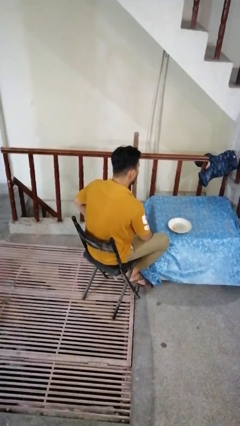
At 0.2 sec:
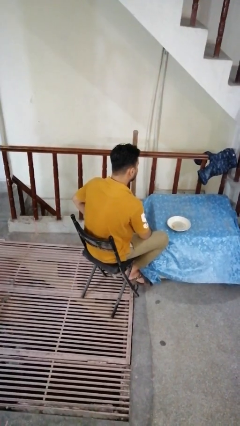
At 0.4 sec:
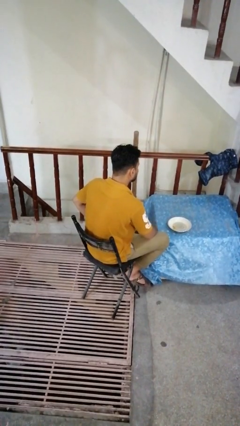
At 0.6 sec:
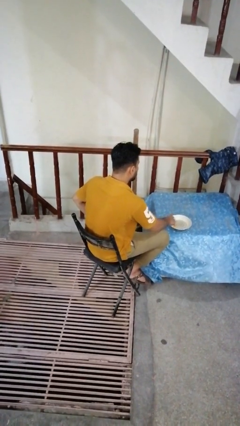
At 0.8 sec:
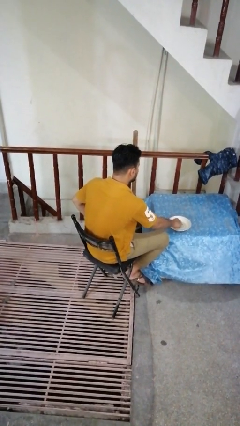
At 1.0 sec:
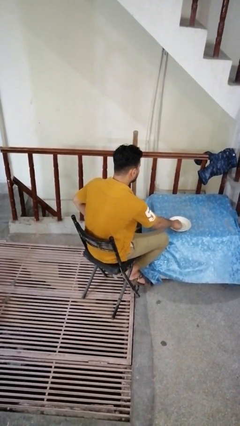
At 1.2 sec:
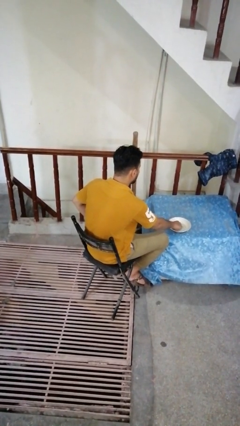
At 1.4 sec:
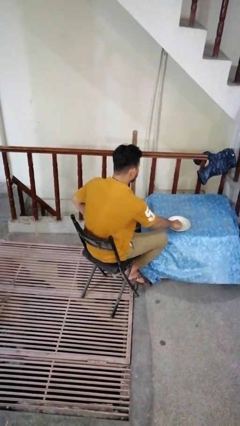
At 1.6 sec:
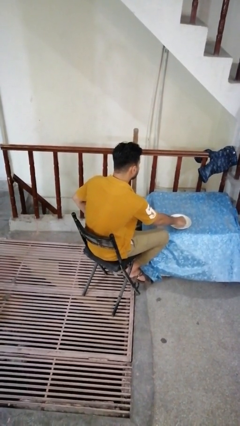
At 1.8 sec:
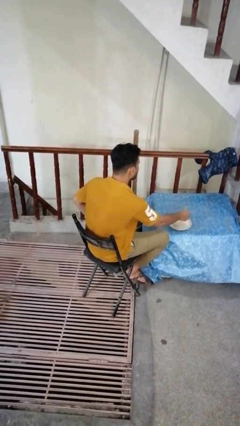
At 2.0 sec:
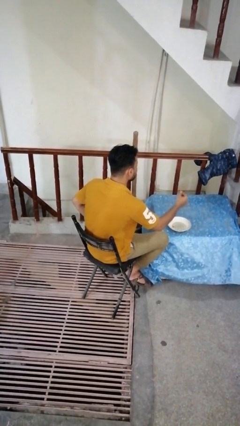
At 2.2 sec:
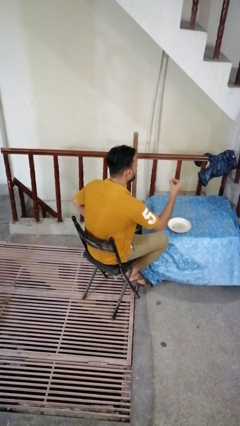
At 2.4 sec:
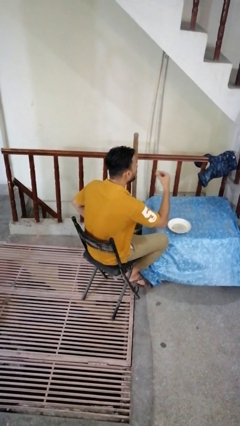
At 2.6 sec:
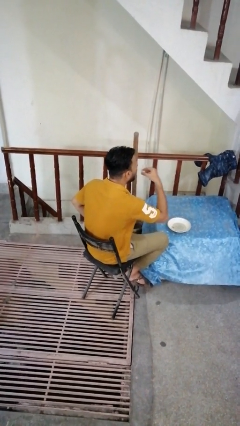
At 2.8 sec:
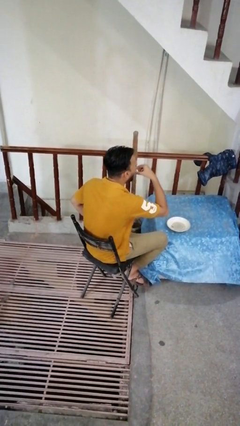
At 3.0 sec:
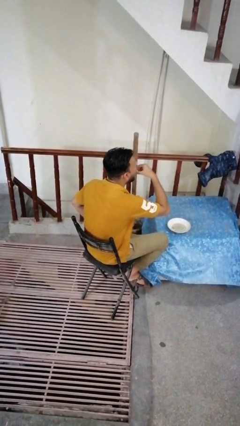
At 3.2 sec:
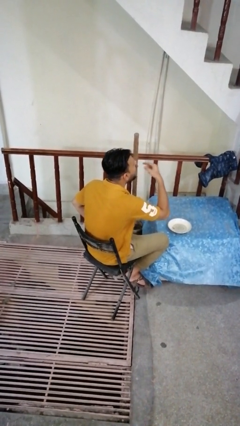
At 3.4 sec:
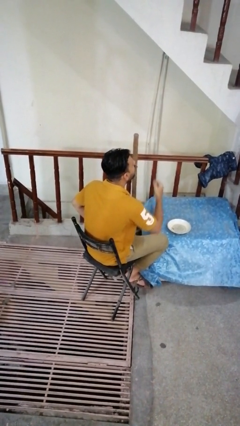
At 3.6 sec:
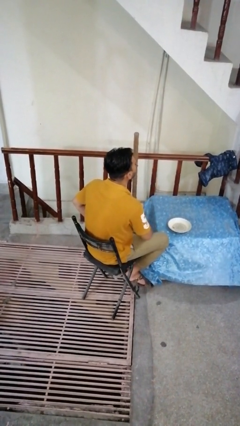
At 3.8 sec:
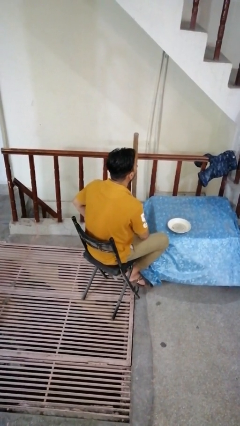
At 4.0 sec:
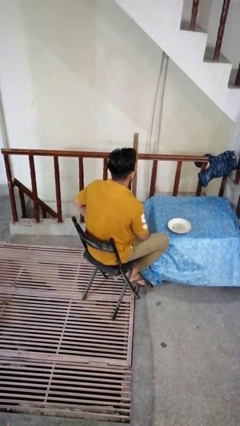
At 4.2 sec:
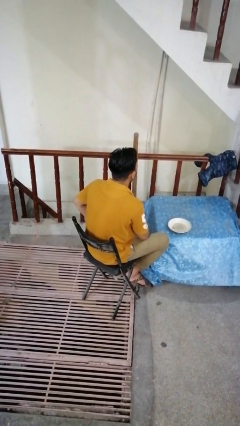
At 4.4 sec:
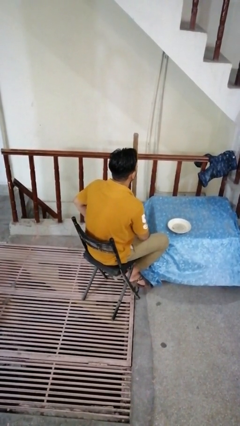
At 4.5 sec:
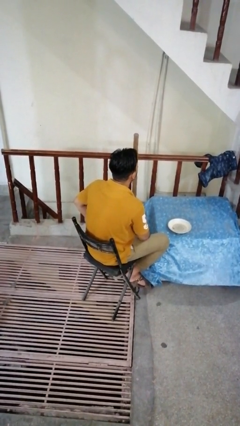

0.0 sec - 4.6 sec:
person eats with hands

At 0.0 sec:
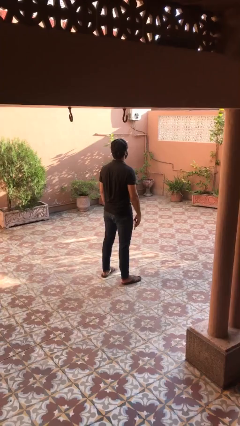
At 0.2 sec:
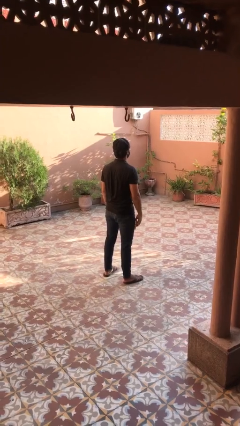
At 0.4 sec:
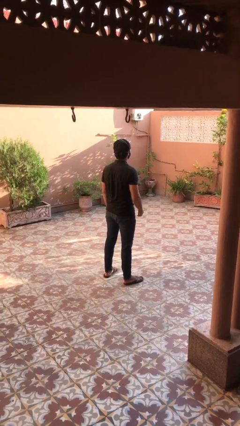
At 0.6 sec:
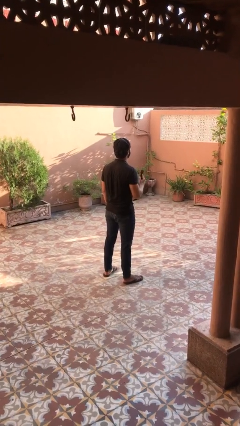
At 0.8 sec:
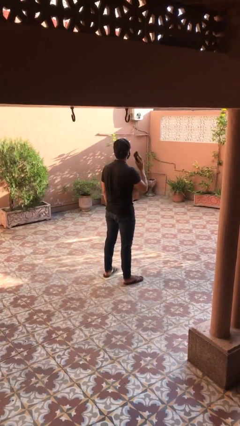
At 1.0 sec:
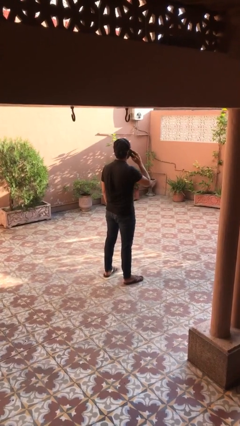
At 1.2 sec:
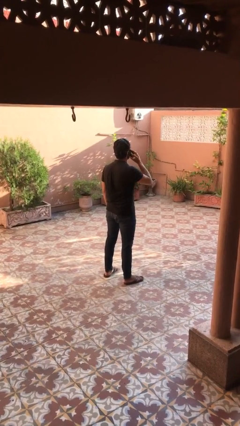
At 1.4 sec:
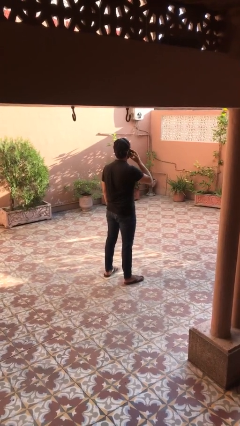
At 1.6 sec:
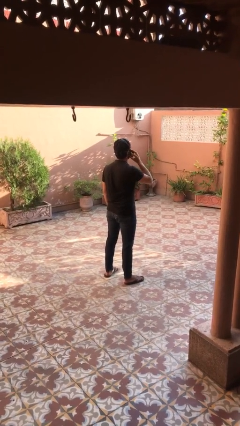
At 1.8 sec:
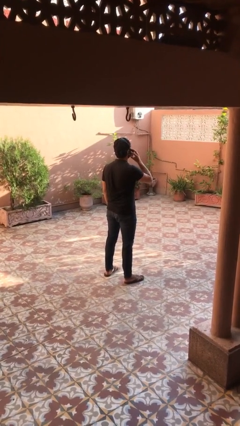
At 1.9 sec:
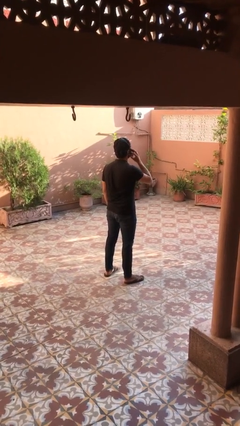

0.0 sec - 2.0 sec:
person gestures call me

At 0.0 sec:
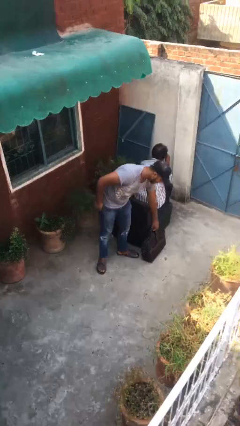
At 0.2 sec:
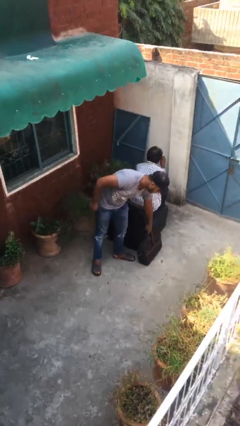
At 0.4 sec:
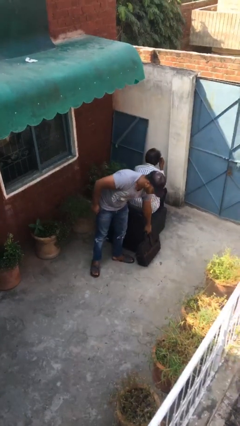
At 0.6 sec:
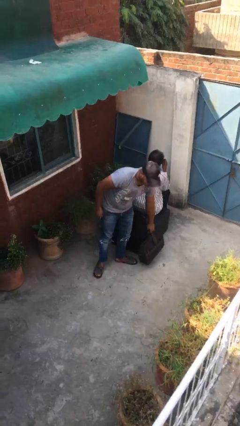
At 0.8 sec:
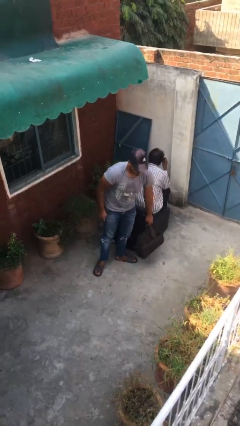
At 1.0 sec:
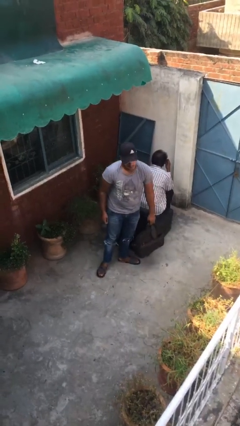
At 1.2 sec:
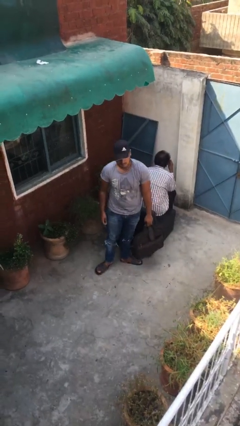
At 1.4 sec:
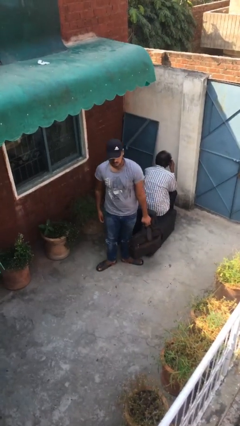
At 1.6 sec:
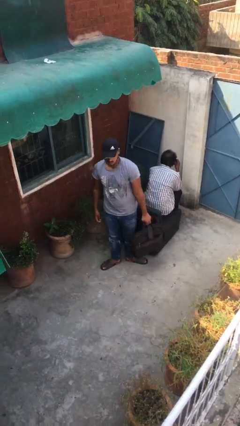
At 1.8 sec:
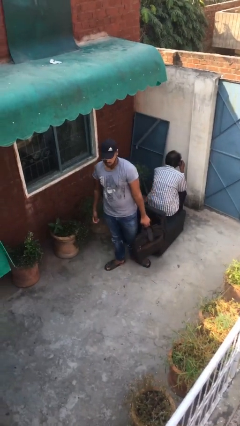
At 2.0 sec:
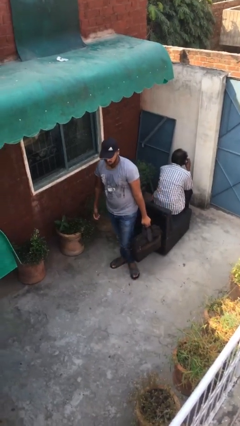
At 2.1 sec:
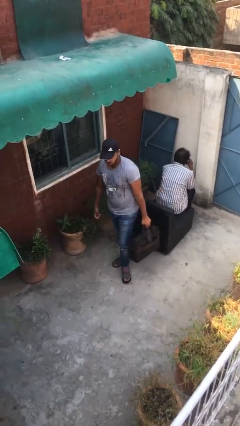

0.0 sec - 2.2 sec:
person steals object from person

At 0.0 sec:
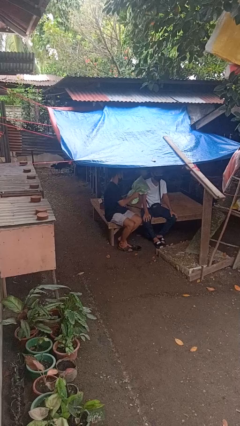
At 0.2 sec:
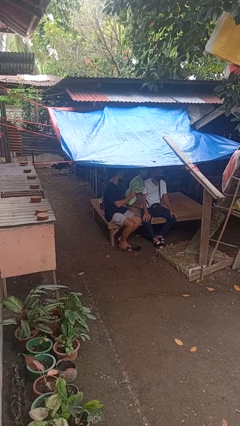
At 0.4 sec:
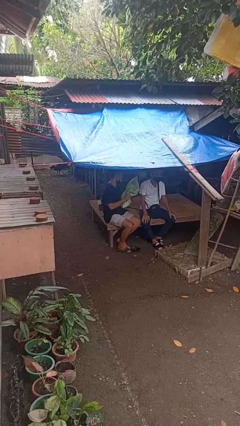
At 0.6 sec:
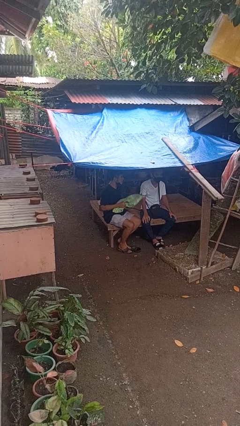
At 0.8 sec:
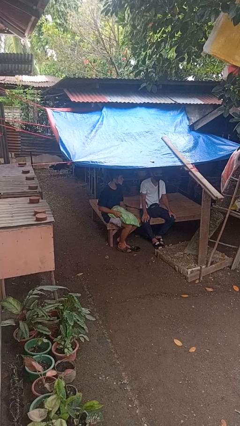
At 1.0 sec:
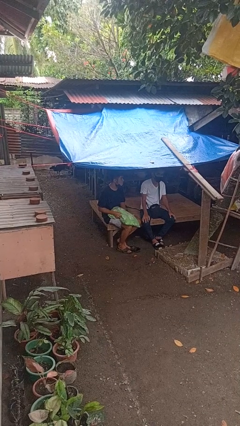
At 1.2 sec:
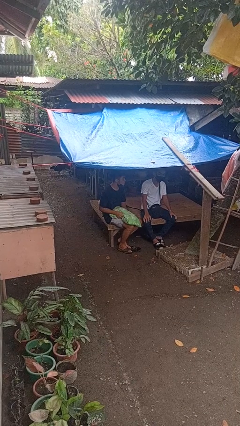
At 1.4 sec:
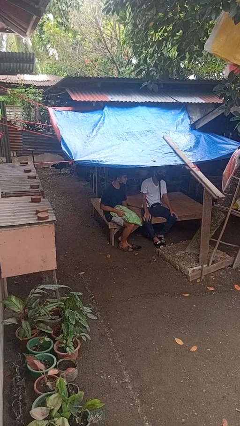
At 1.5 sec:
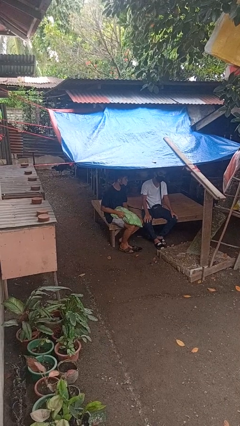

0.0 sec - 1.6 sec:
person hits person with pillow

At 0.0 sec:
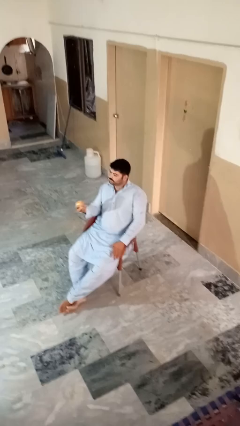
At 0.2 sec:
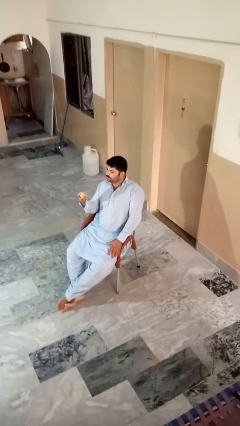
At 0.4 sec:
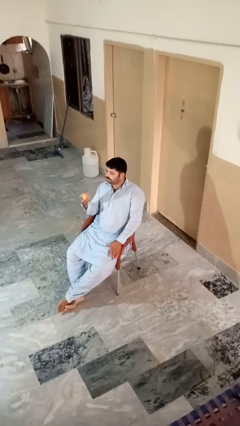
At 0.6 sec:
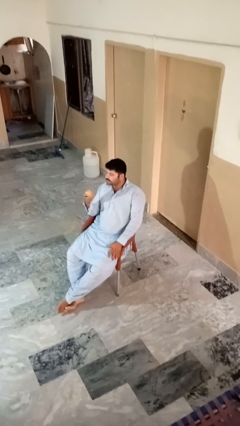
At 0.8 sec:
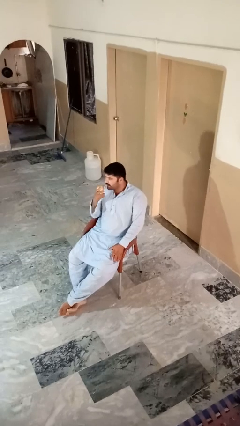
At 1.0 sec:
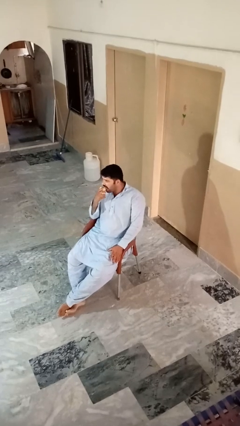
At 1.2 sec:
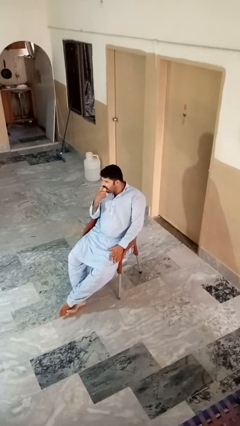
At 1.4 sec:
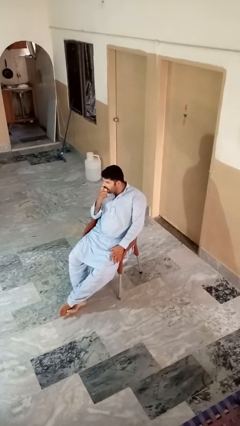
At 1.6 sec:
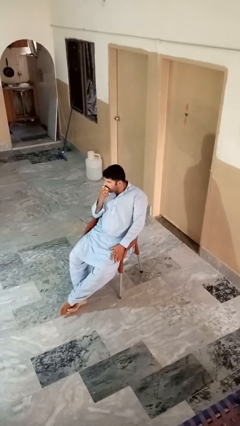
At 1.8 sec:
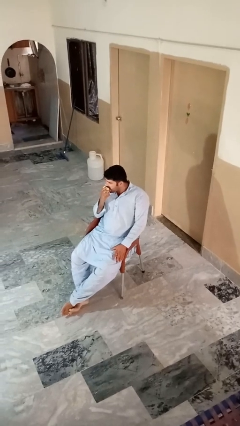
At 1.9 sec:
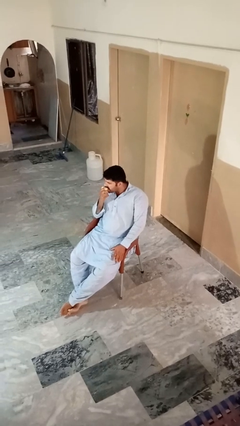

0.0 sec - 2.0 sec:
person eats apple

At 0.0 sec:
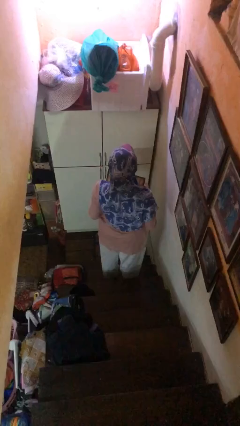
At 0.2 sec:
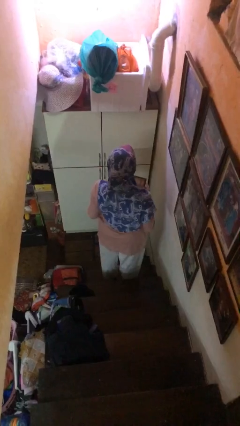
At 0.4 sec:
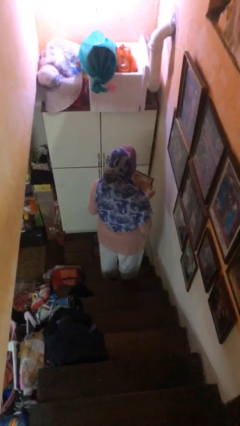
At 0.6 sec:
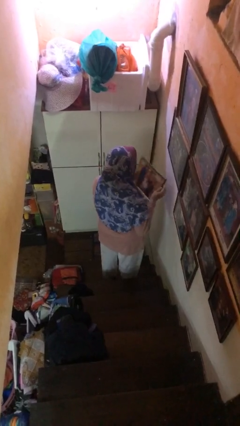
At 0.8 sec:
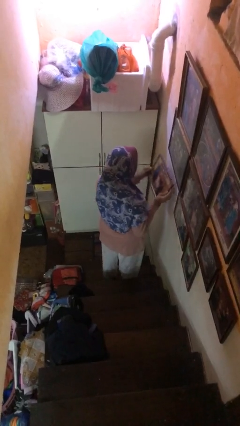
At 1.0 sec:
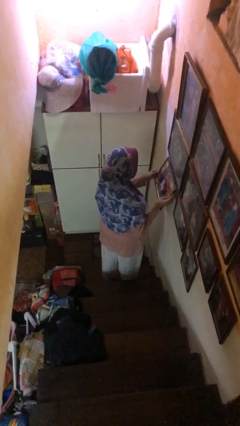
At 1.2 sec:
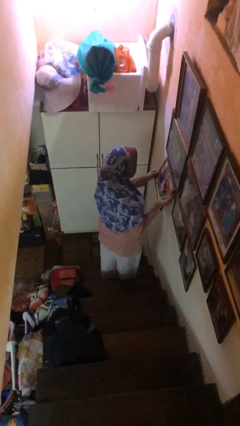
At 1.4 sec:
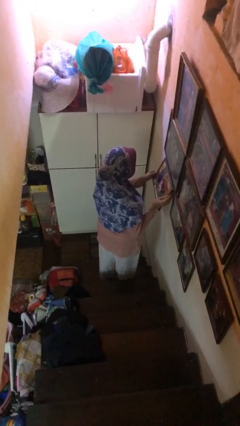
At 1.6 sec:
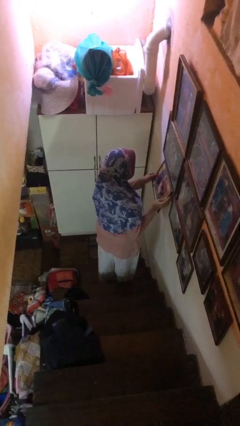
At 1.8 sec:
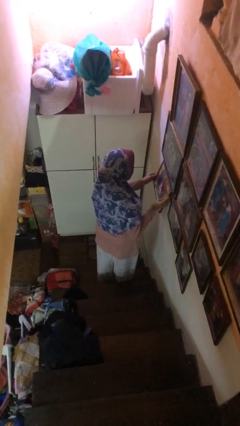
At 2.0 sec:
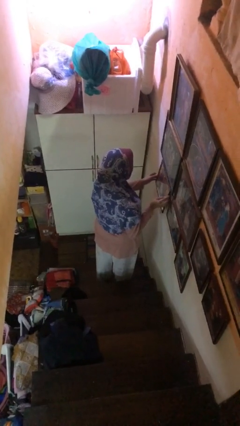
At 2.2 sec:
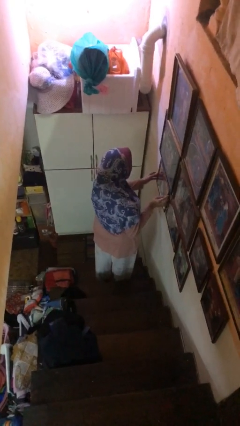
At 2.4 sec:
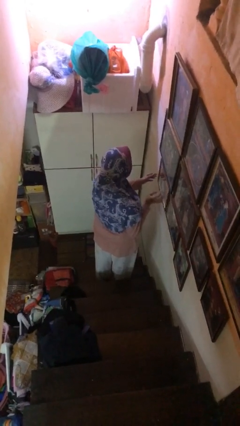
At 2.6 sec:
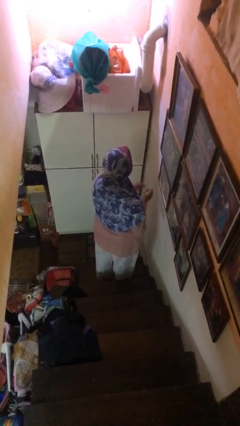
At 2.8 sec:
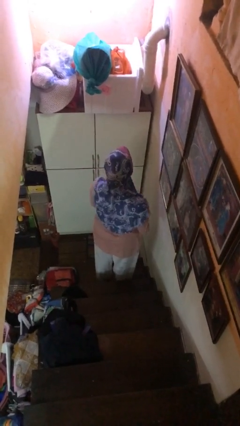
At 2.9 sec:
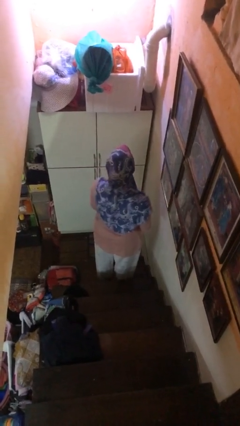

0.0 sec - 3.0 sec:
person takes down picture frame

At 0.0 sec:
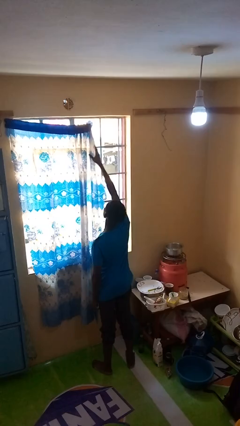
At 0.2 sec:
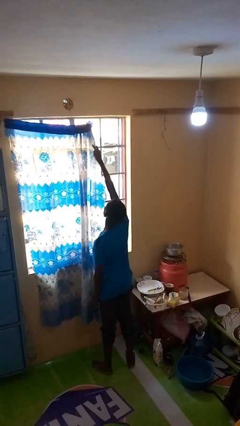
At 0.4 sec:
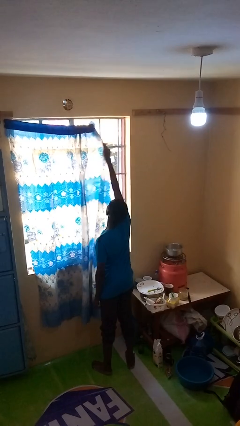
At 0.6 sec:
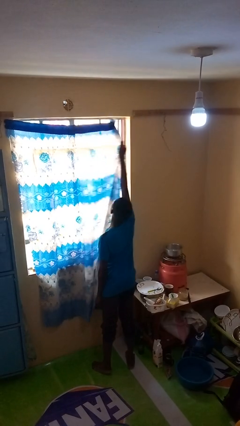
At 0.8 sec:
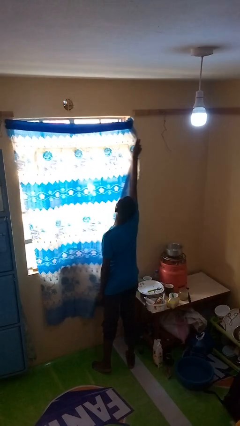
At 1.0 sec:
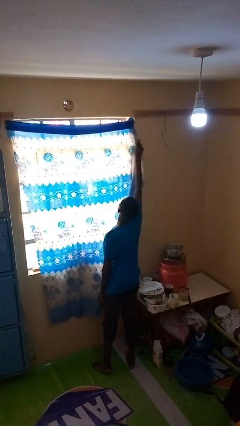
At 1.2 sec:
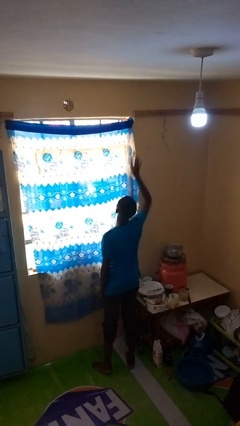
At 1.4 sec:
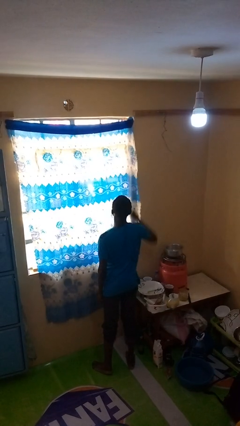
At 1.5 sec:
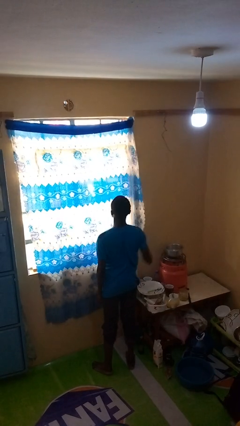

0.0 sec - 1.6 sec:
person closes curtains
